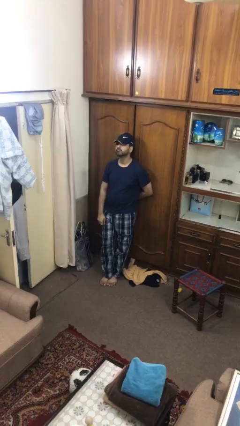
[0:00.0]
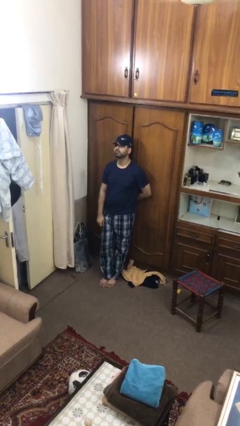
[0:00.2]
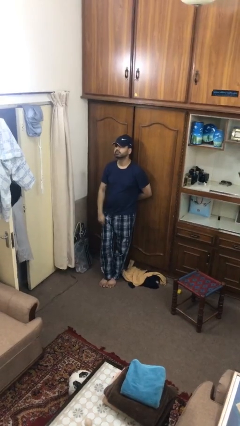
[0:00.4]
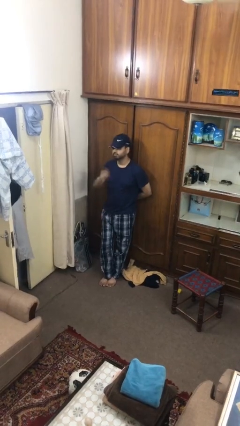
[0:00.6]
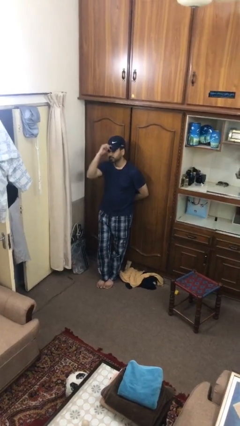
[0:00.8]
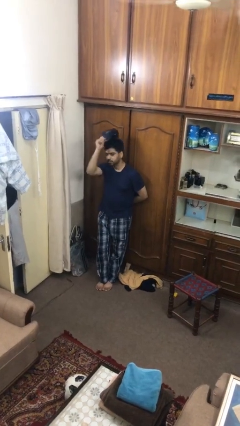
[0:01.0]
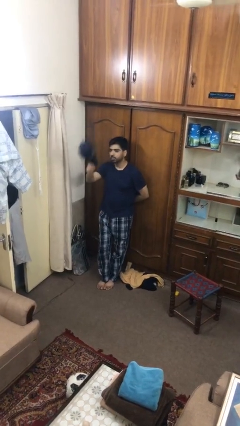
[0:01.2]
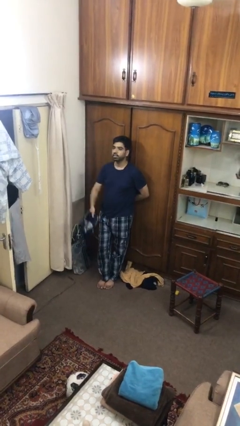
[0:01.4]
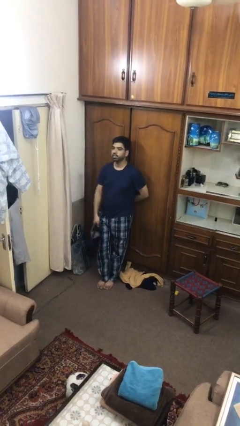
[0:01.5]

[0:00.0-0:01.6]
person takes off hat

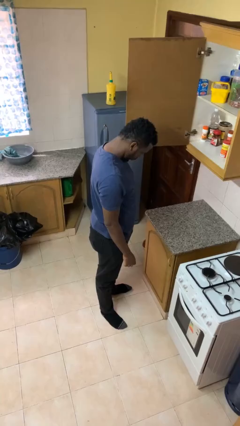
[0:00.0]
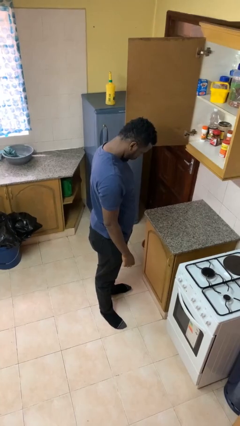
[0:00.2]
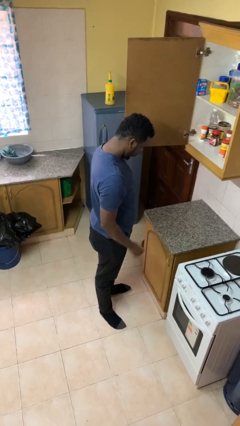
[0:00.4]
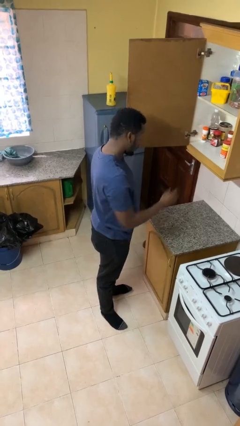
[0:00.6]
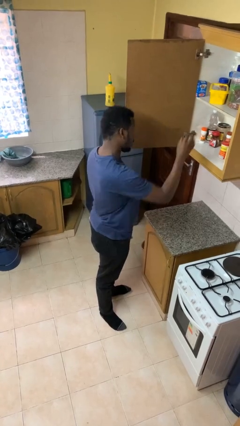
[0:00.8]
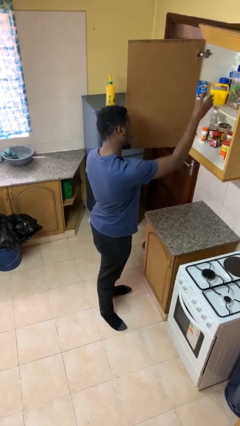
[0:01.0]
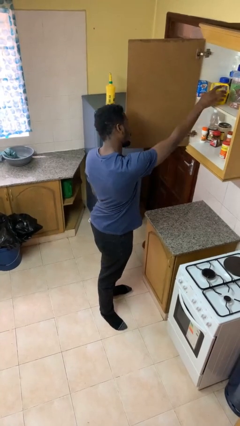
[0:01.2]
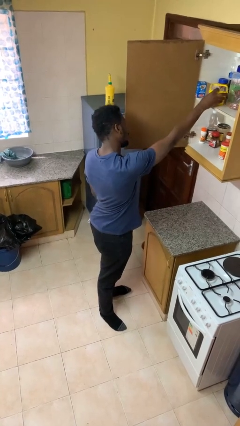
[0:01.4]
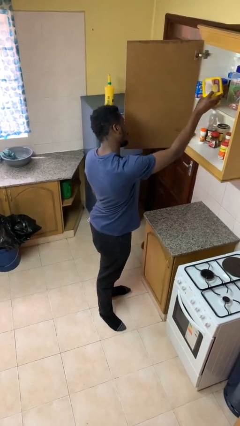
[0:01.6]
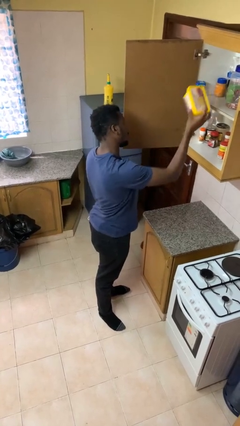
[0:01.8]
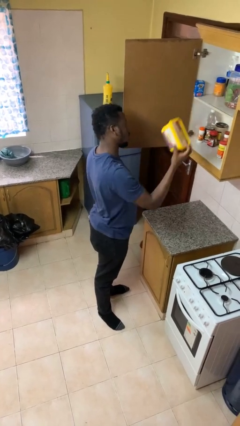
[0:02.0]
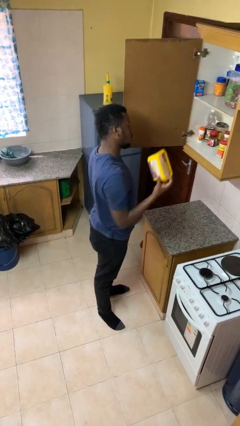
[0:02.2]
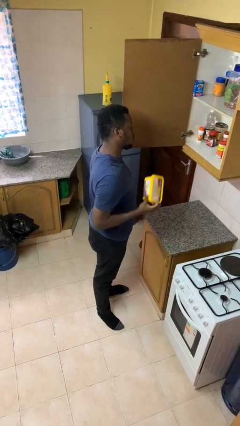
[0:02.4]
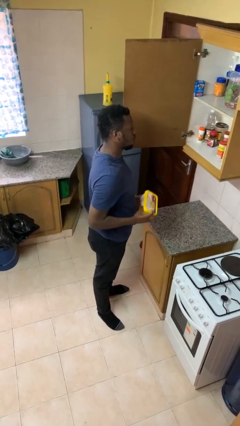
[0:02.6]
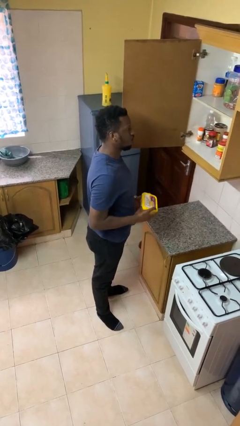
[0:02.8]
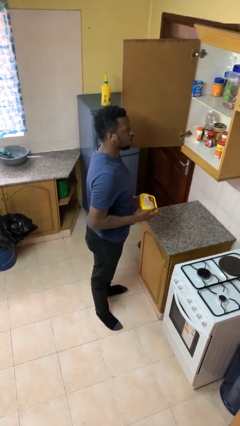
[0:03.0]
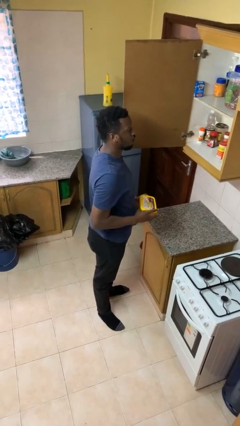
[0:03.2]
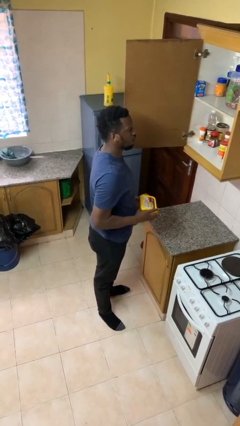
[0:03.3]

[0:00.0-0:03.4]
person picks up object from shelf

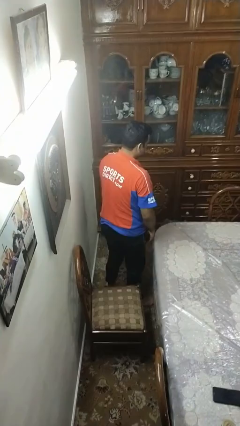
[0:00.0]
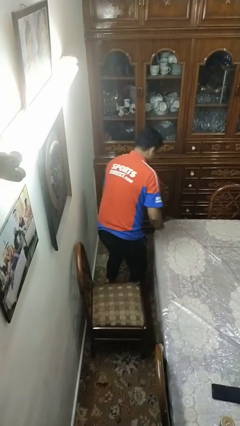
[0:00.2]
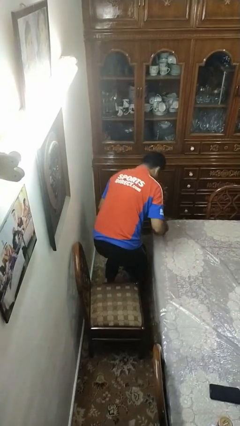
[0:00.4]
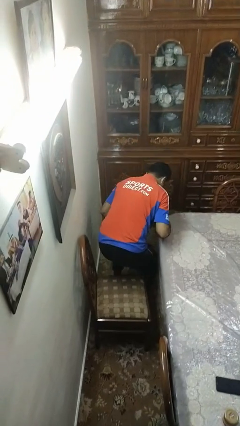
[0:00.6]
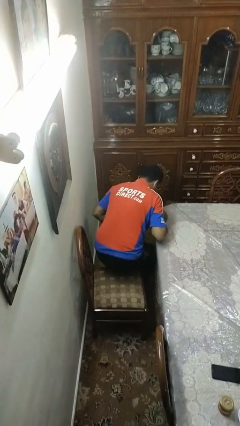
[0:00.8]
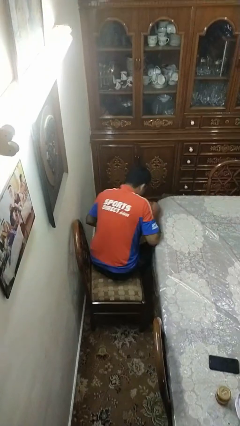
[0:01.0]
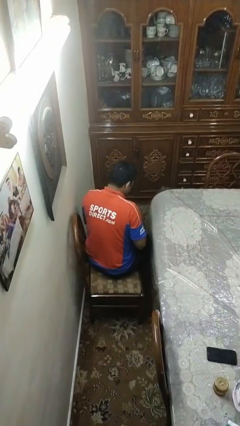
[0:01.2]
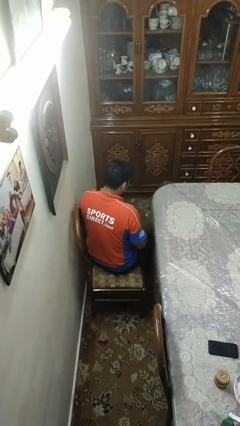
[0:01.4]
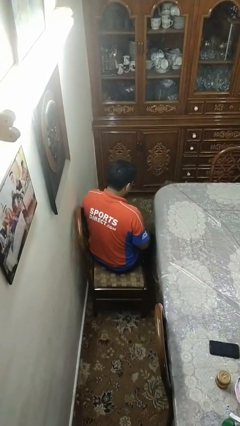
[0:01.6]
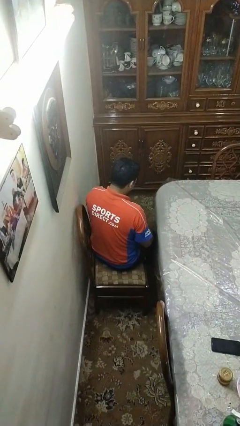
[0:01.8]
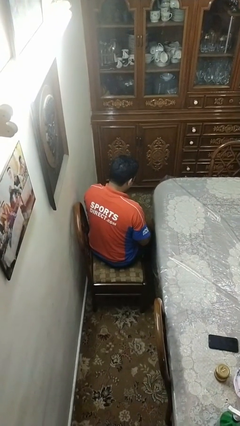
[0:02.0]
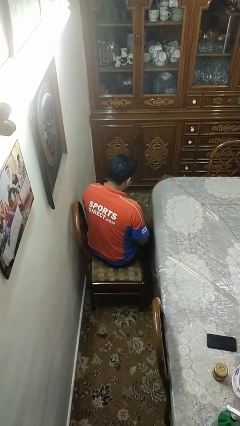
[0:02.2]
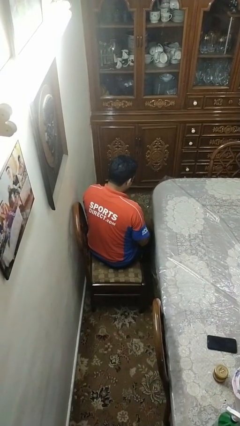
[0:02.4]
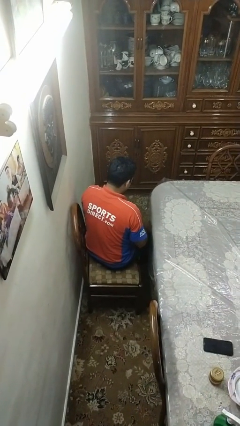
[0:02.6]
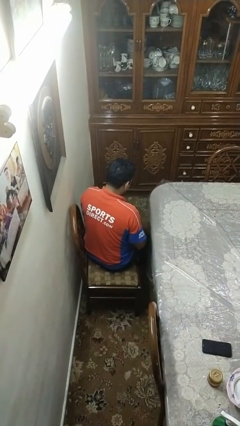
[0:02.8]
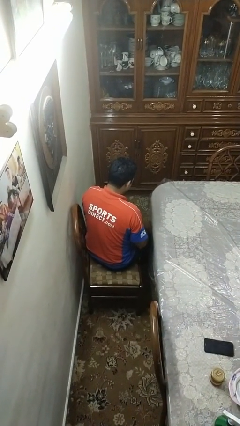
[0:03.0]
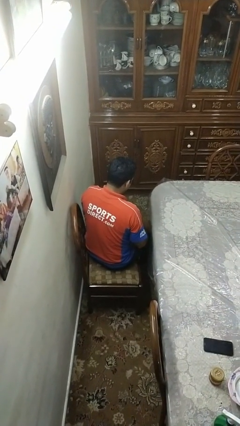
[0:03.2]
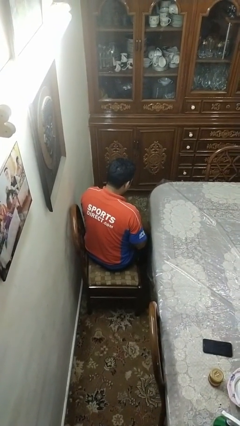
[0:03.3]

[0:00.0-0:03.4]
person sits down

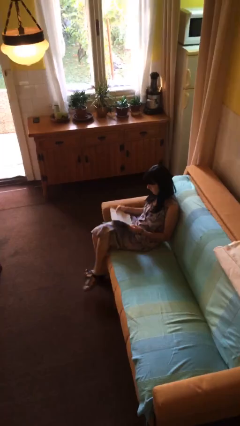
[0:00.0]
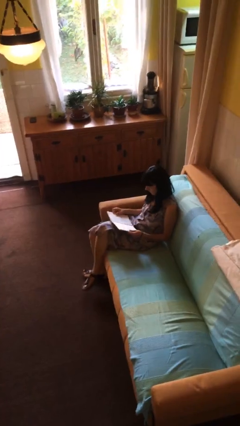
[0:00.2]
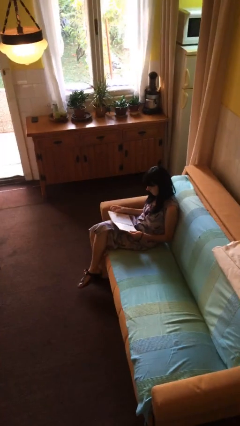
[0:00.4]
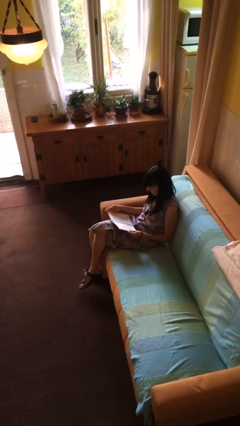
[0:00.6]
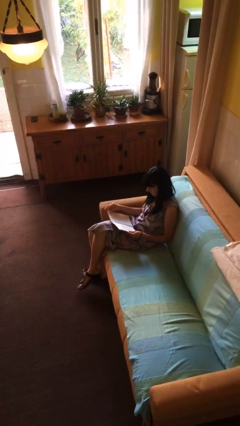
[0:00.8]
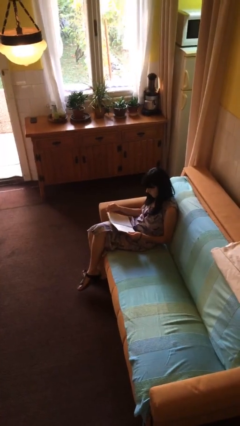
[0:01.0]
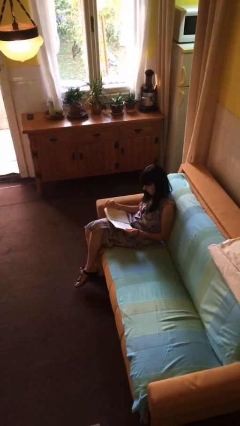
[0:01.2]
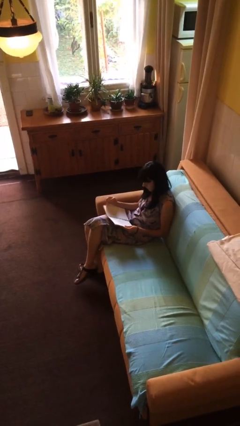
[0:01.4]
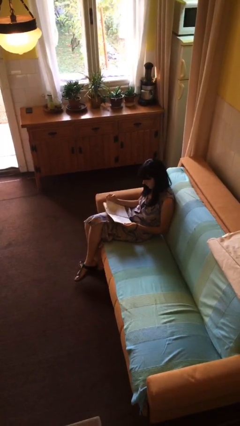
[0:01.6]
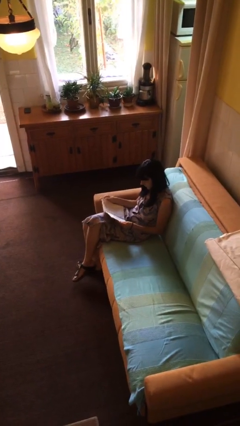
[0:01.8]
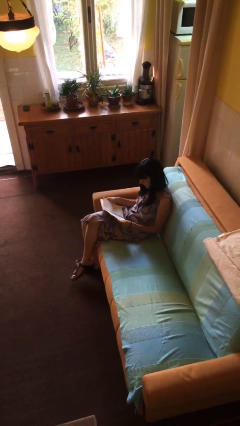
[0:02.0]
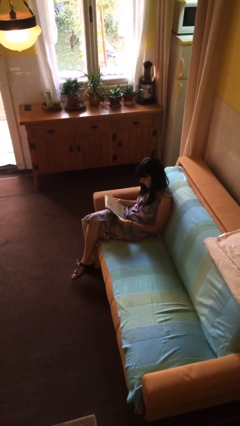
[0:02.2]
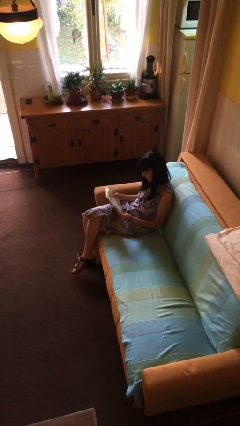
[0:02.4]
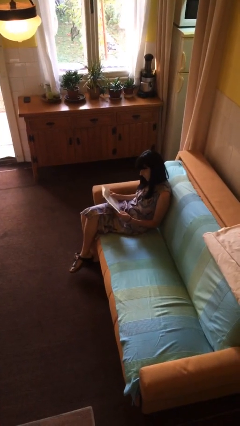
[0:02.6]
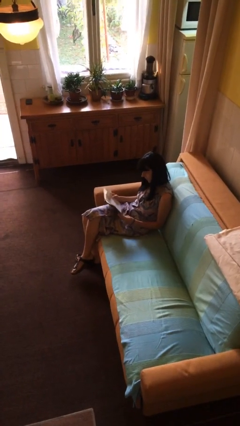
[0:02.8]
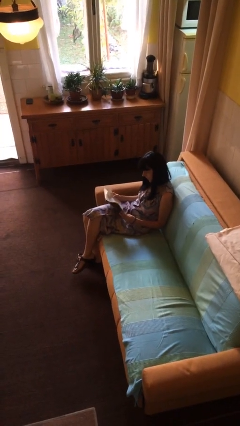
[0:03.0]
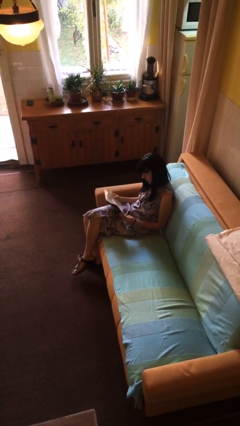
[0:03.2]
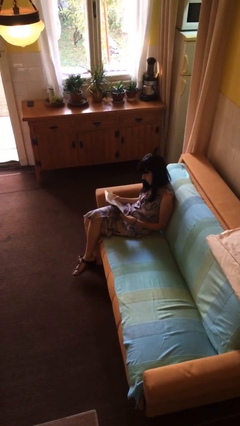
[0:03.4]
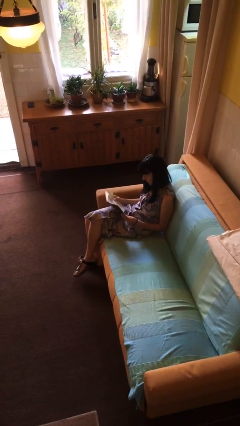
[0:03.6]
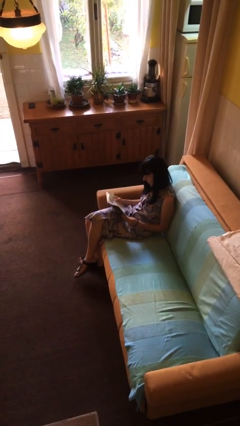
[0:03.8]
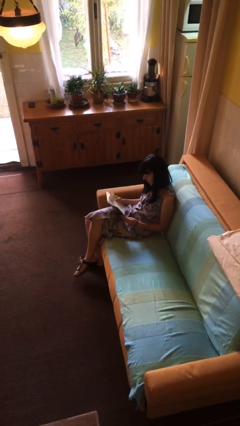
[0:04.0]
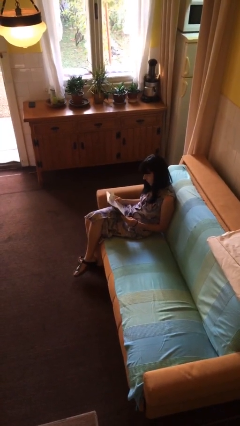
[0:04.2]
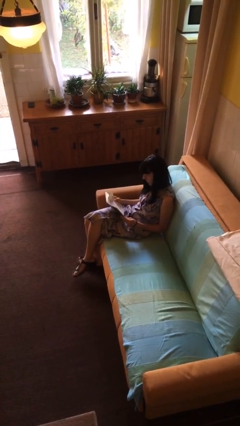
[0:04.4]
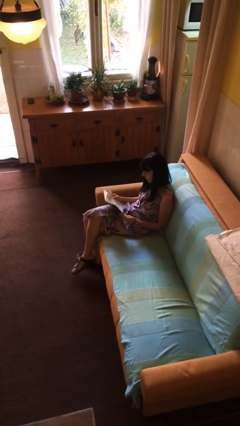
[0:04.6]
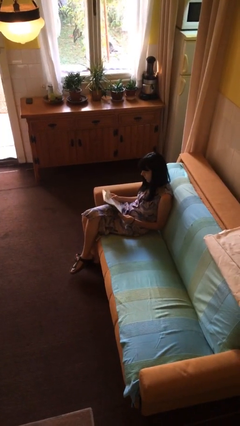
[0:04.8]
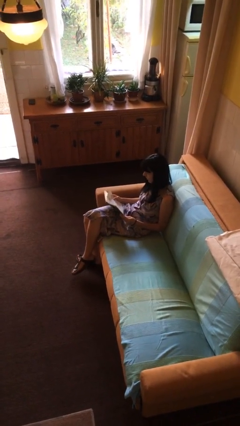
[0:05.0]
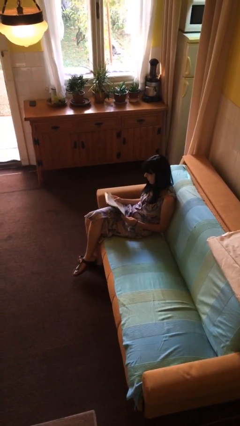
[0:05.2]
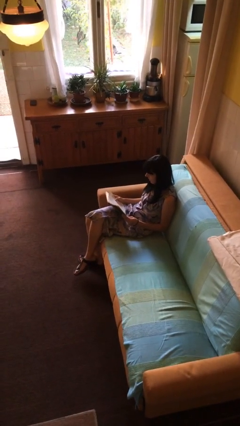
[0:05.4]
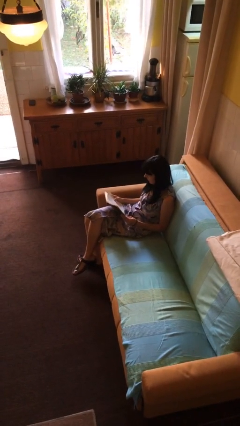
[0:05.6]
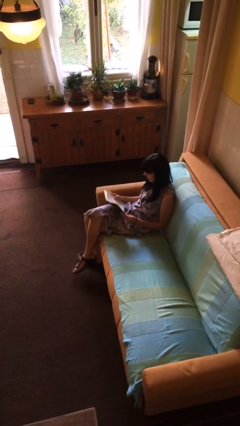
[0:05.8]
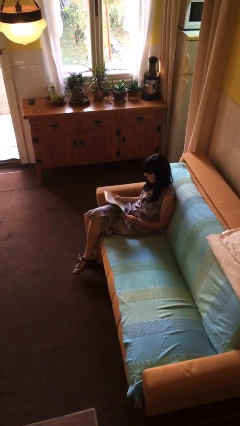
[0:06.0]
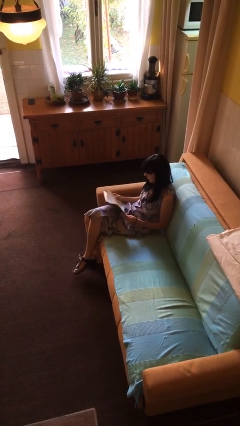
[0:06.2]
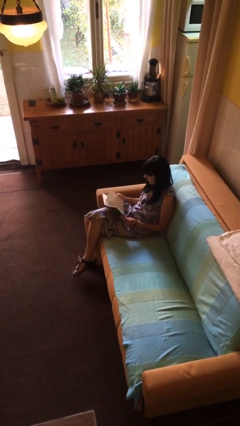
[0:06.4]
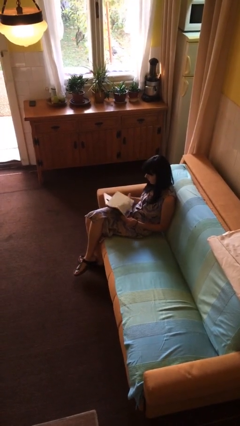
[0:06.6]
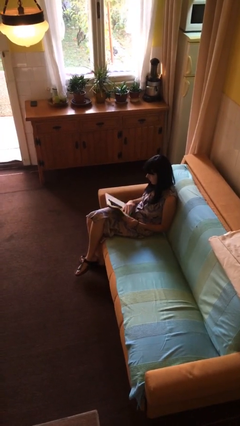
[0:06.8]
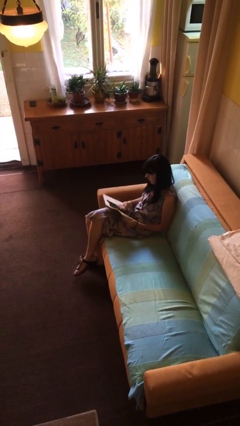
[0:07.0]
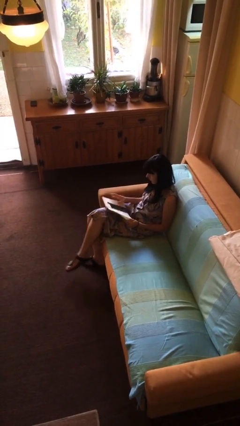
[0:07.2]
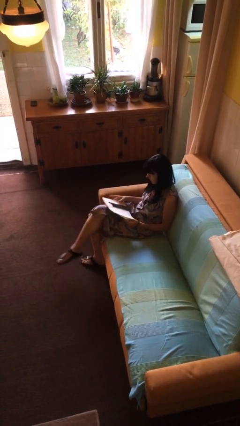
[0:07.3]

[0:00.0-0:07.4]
person reads document

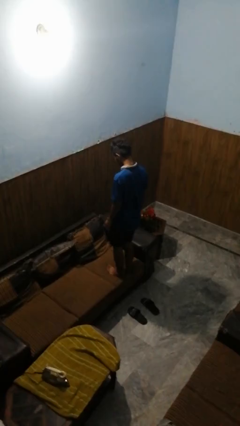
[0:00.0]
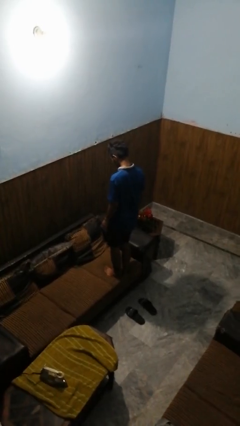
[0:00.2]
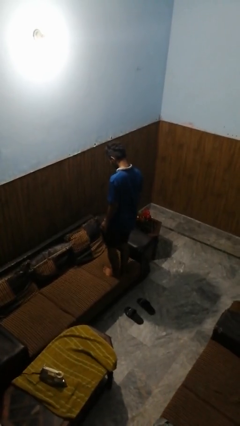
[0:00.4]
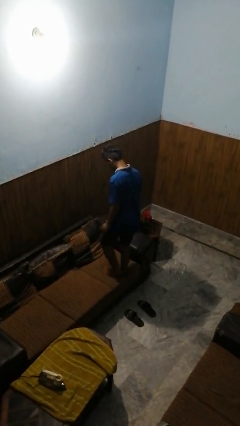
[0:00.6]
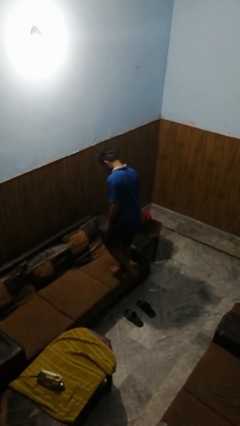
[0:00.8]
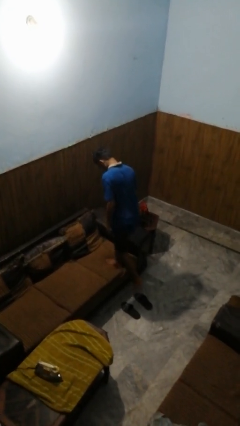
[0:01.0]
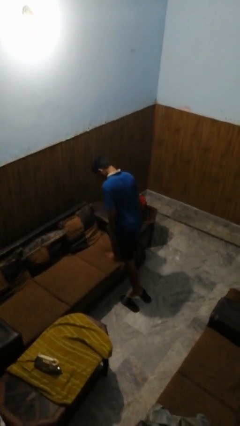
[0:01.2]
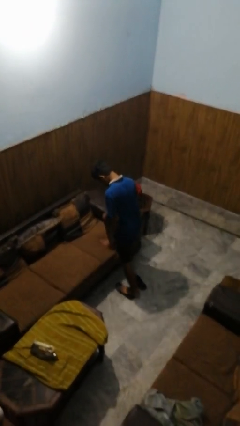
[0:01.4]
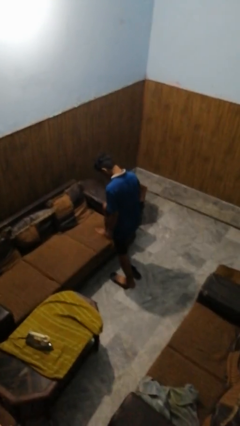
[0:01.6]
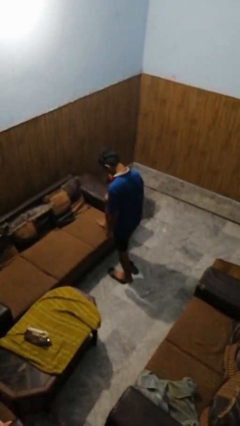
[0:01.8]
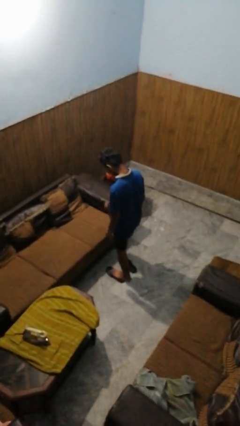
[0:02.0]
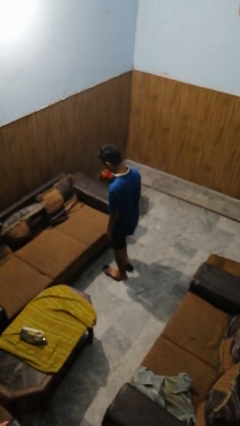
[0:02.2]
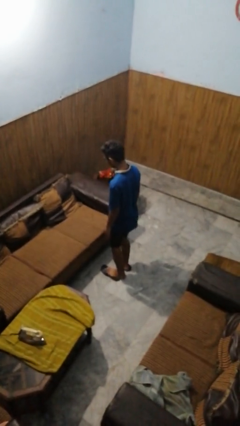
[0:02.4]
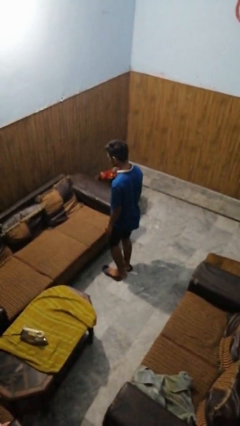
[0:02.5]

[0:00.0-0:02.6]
person climbs off couch
